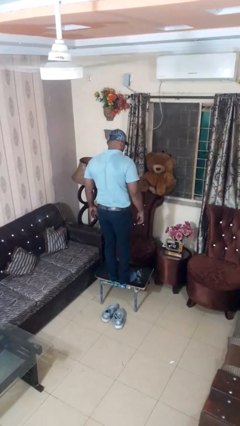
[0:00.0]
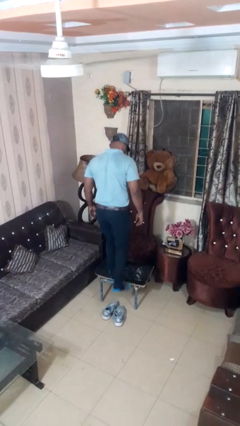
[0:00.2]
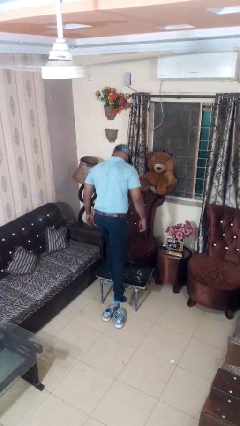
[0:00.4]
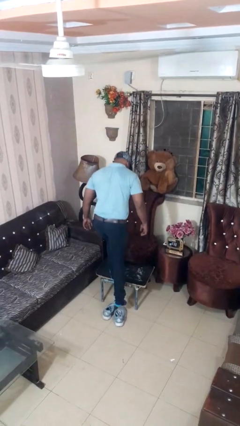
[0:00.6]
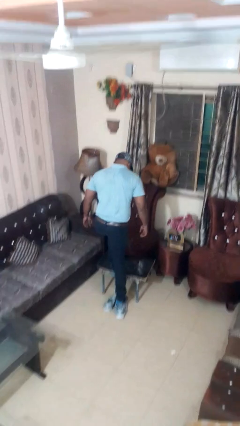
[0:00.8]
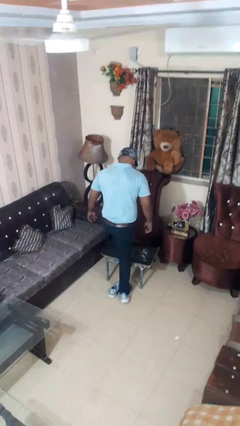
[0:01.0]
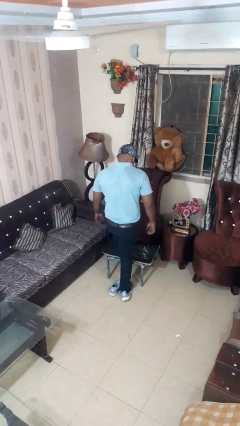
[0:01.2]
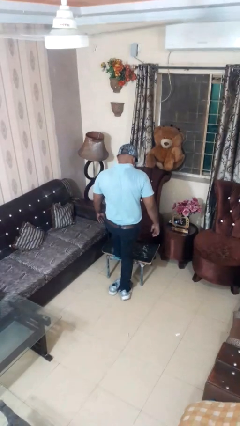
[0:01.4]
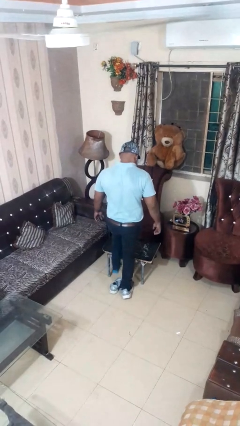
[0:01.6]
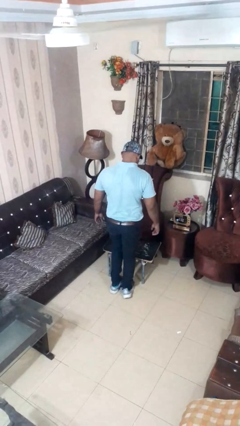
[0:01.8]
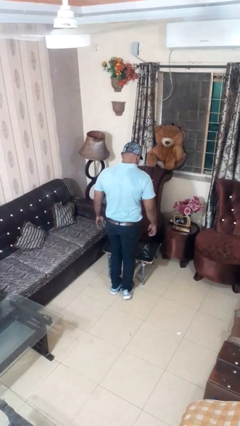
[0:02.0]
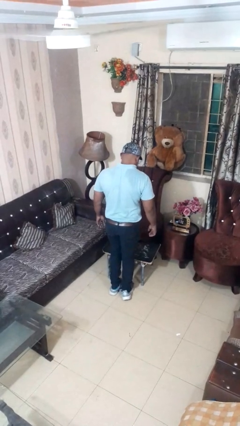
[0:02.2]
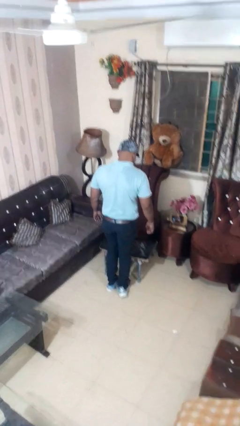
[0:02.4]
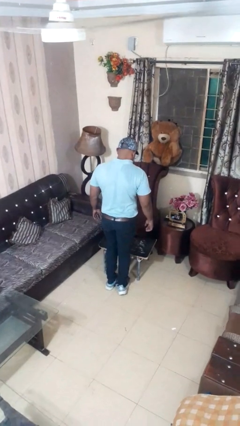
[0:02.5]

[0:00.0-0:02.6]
person climbs off table

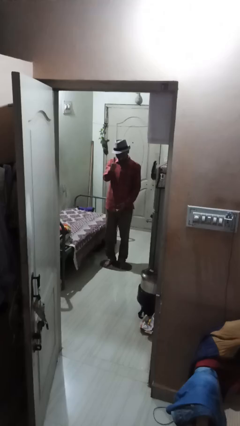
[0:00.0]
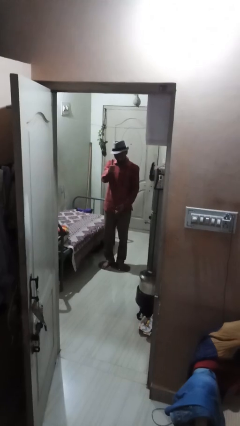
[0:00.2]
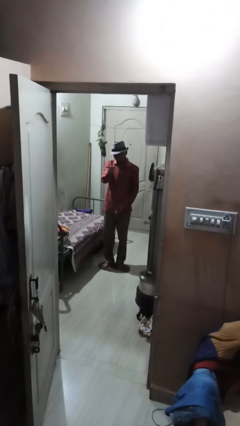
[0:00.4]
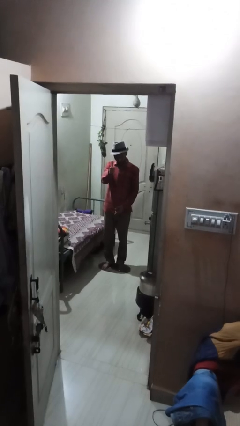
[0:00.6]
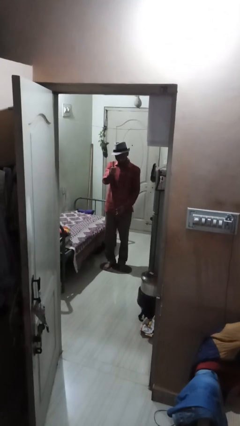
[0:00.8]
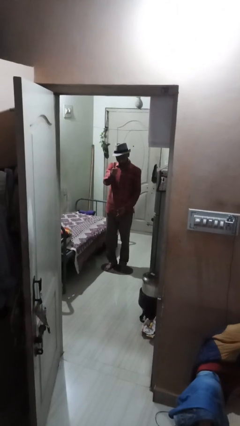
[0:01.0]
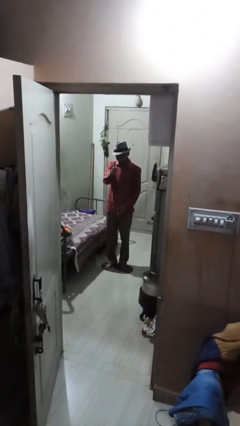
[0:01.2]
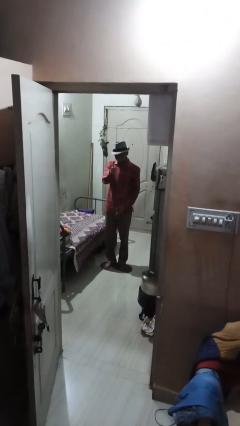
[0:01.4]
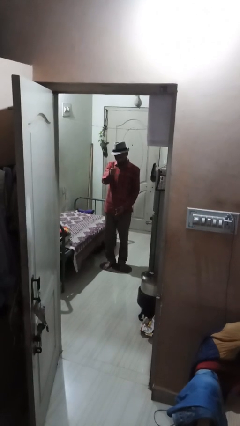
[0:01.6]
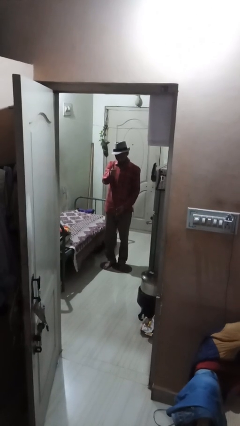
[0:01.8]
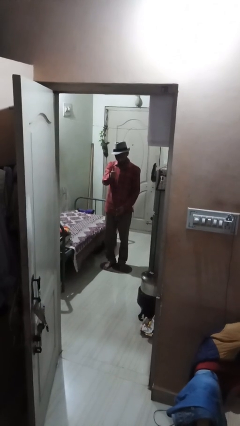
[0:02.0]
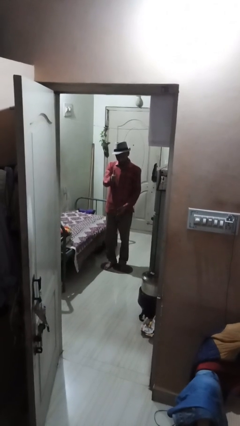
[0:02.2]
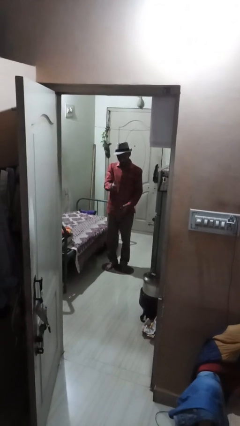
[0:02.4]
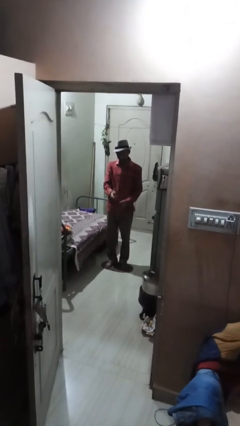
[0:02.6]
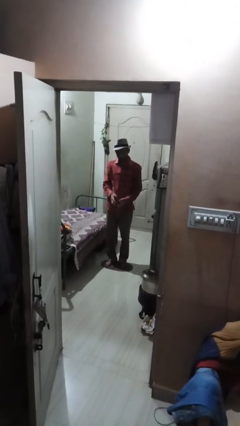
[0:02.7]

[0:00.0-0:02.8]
person gestures thumbs up

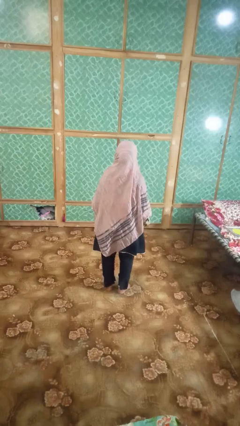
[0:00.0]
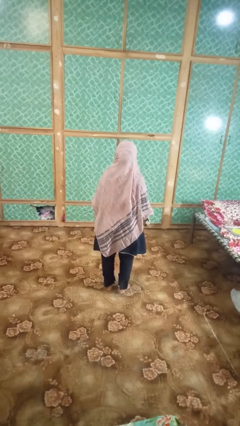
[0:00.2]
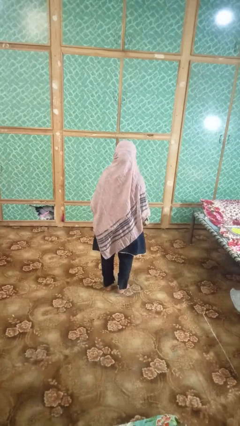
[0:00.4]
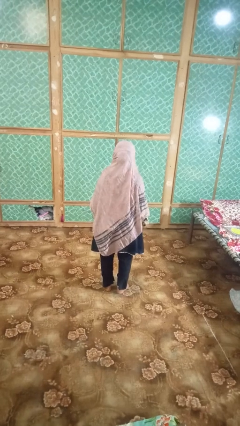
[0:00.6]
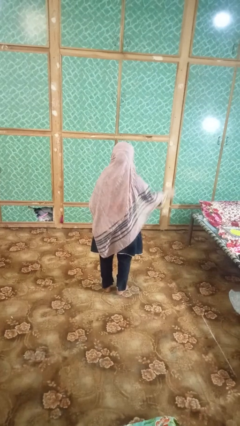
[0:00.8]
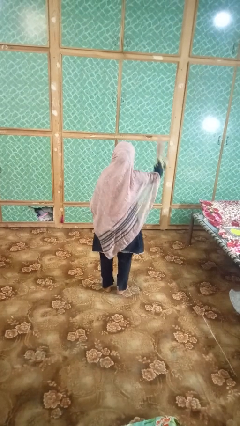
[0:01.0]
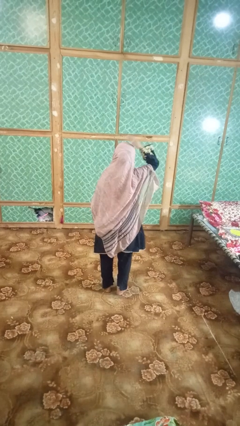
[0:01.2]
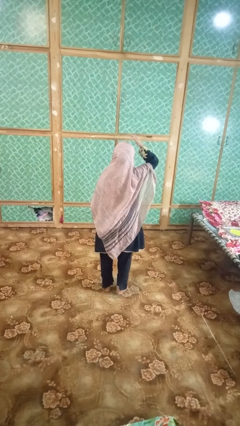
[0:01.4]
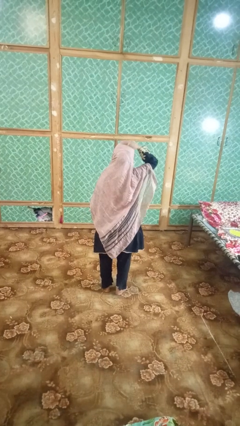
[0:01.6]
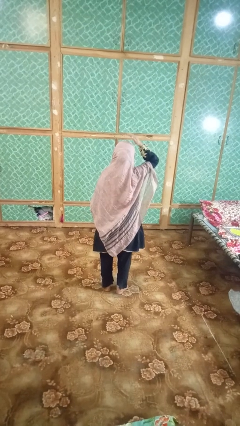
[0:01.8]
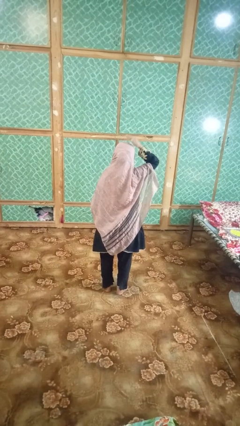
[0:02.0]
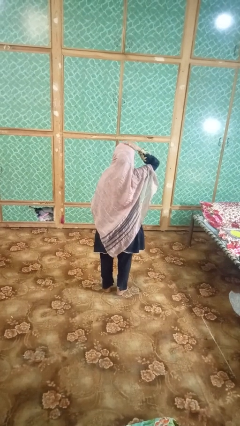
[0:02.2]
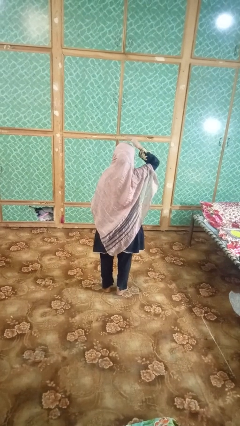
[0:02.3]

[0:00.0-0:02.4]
person pats head

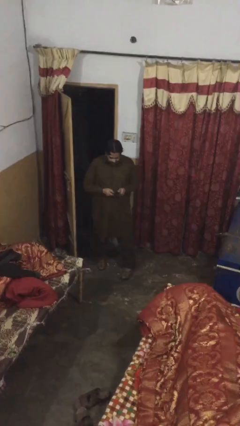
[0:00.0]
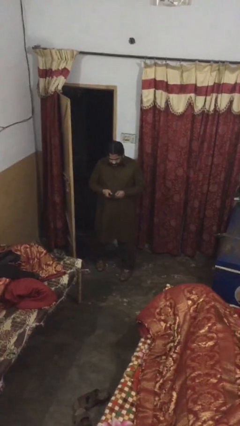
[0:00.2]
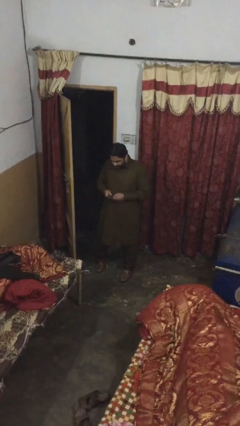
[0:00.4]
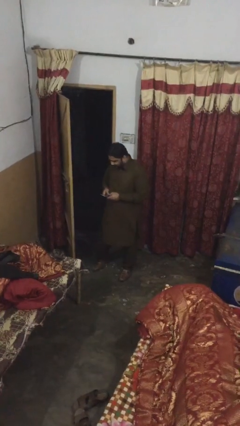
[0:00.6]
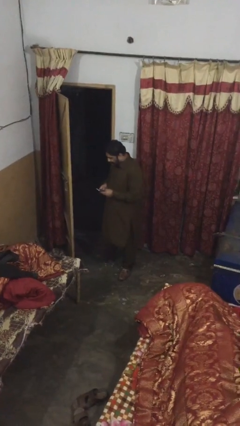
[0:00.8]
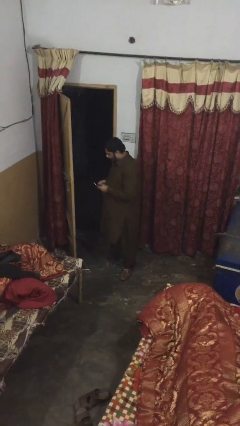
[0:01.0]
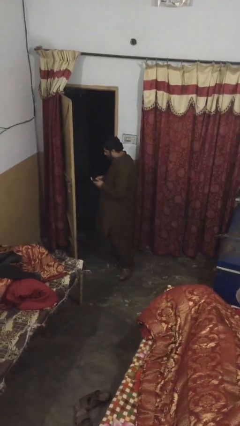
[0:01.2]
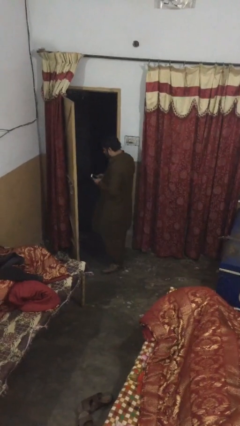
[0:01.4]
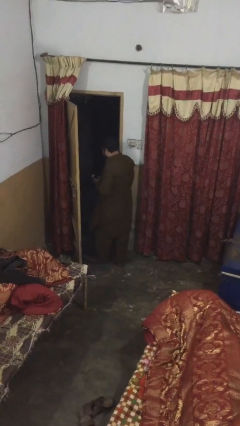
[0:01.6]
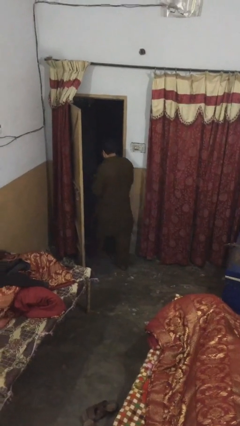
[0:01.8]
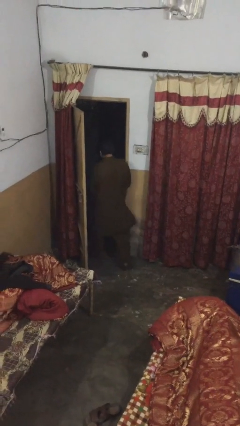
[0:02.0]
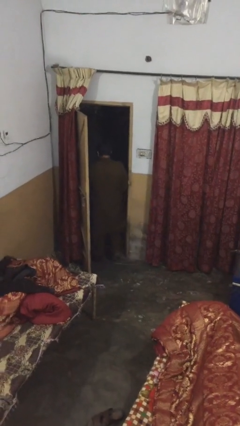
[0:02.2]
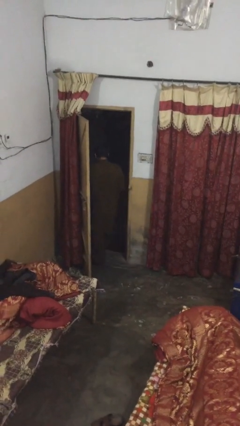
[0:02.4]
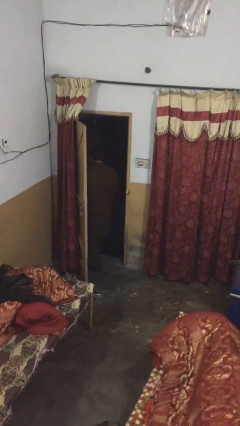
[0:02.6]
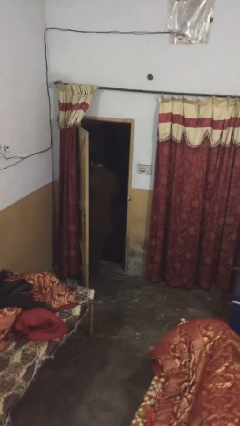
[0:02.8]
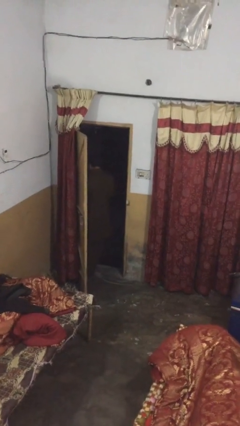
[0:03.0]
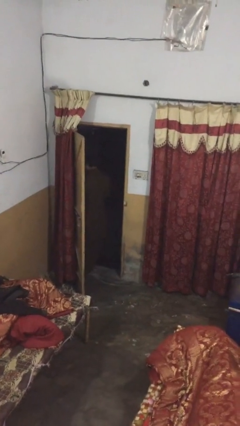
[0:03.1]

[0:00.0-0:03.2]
person exits scene through structure

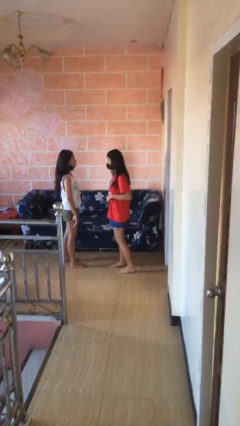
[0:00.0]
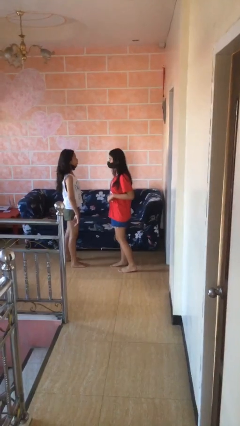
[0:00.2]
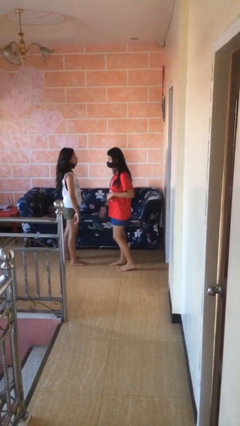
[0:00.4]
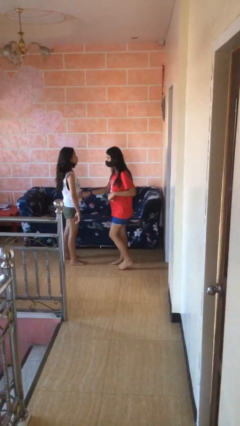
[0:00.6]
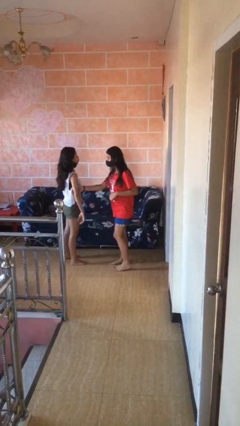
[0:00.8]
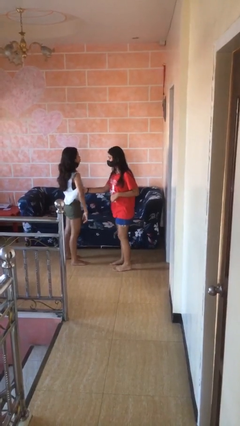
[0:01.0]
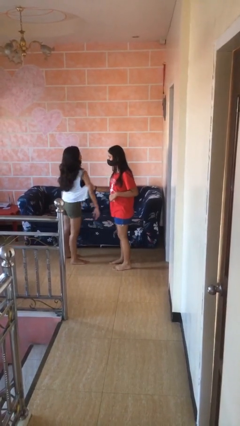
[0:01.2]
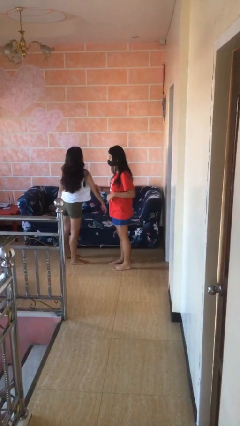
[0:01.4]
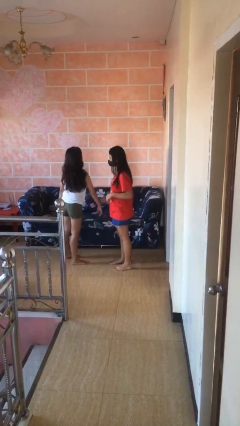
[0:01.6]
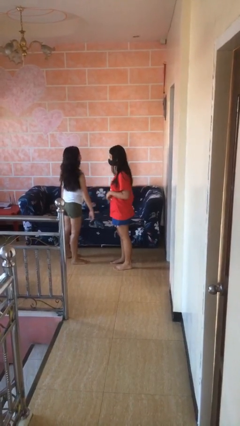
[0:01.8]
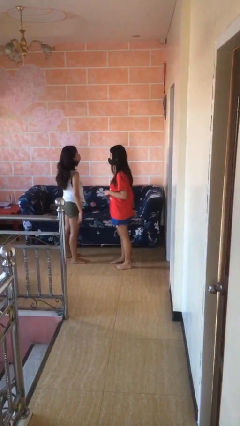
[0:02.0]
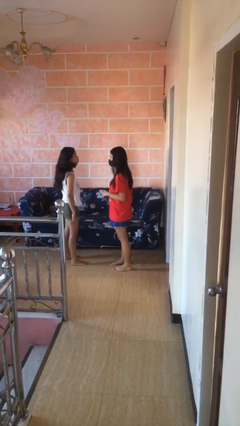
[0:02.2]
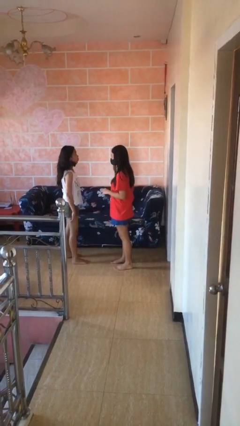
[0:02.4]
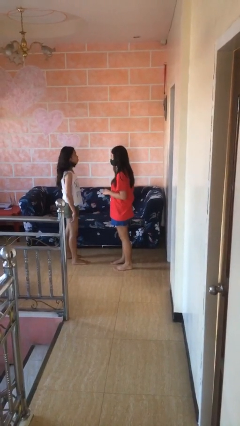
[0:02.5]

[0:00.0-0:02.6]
person grabs person by bicep

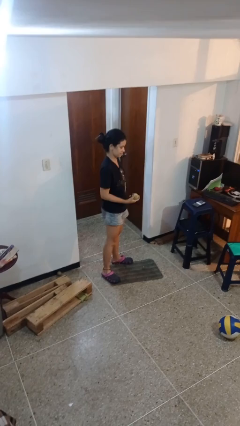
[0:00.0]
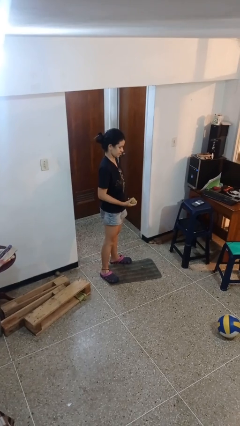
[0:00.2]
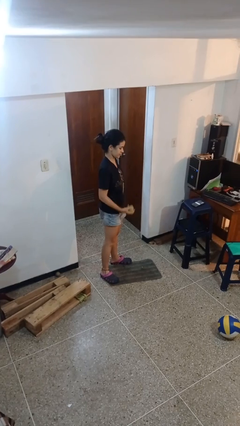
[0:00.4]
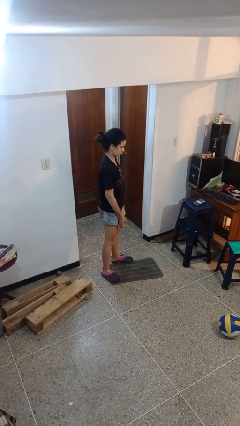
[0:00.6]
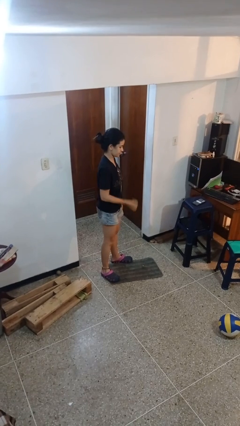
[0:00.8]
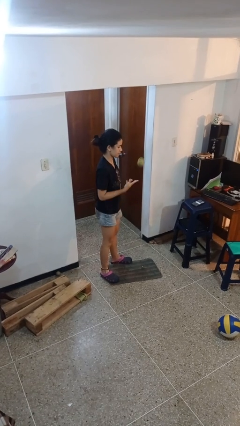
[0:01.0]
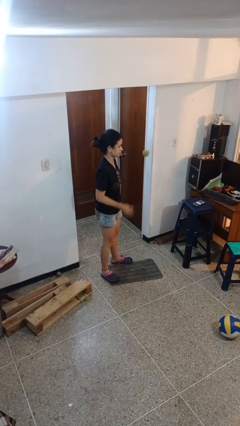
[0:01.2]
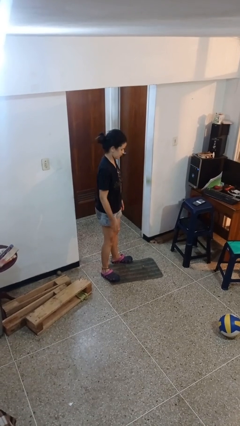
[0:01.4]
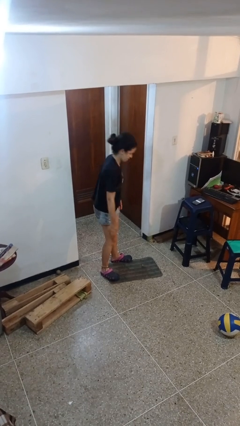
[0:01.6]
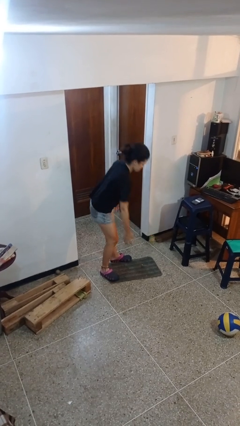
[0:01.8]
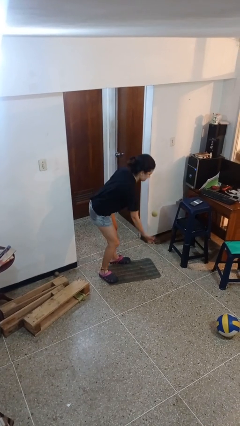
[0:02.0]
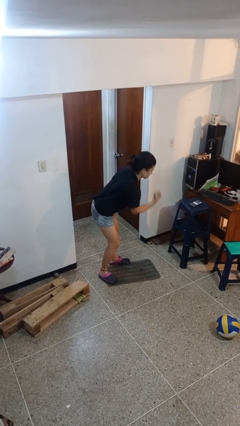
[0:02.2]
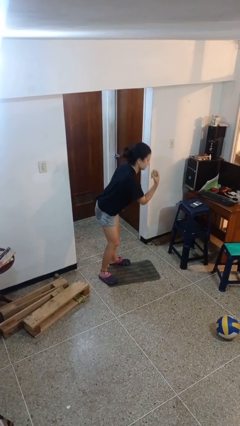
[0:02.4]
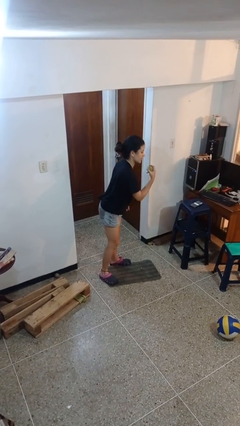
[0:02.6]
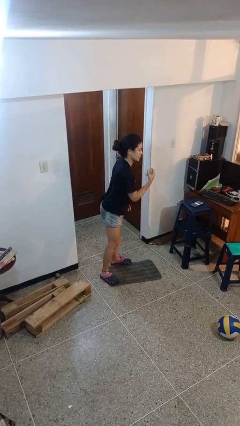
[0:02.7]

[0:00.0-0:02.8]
person bounces ball on floor

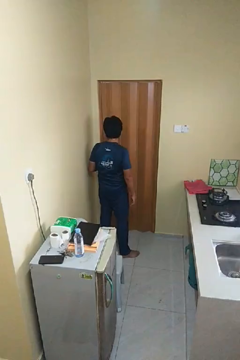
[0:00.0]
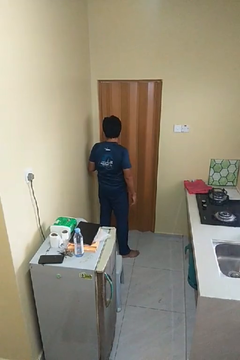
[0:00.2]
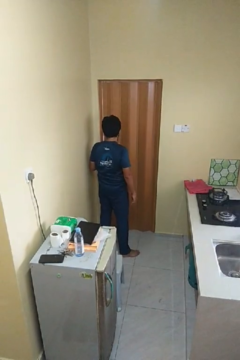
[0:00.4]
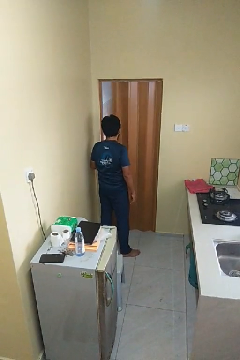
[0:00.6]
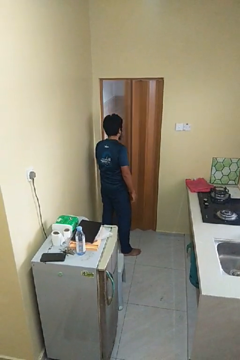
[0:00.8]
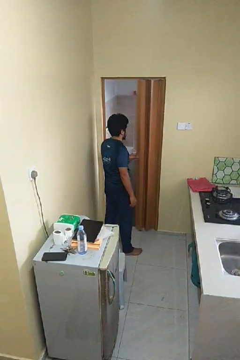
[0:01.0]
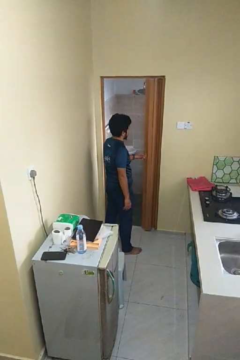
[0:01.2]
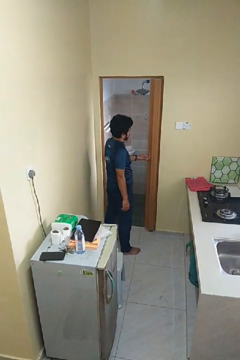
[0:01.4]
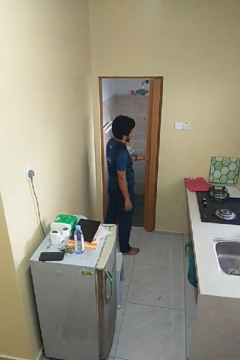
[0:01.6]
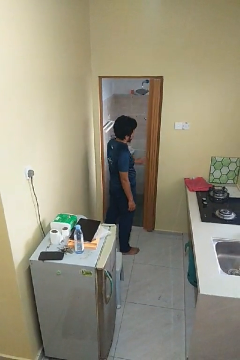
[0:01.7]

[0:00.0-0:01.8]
person opens sliding door
